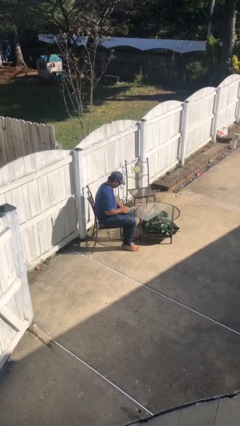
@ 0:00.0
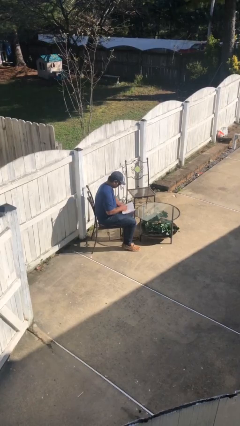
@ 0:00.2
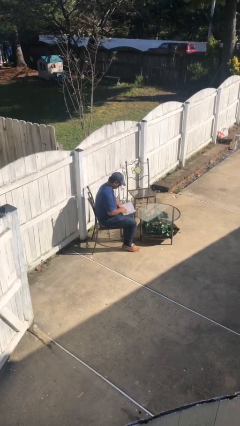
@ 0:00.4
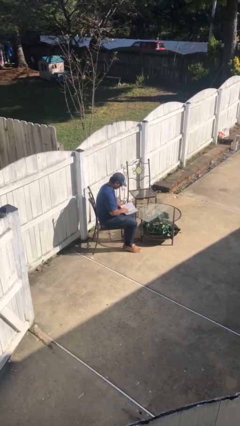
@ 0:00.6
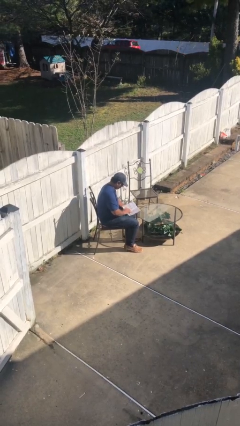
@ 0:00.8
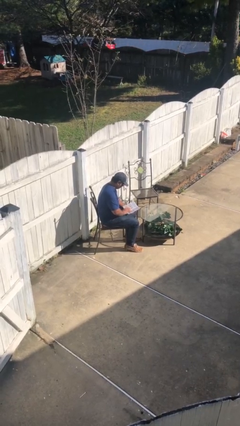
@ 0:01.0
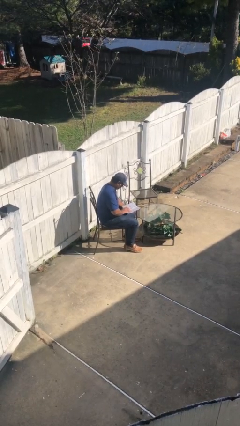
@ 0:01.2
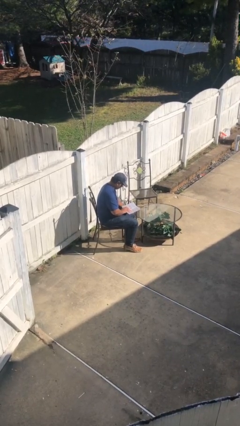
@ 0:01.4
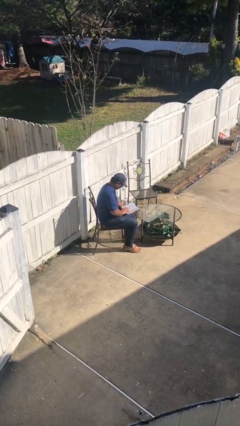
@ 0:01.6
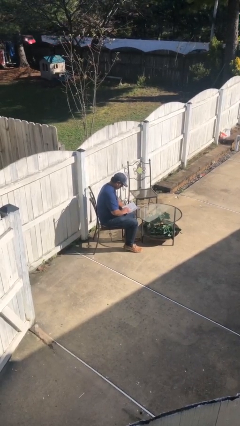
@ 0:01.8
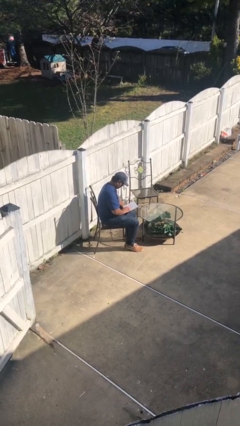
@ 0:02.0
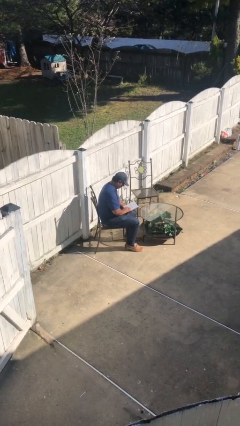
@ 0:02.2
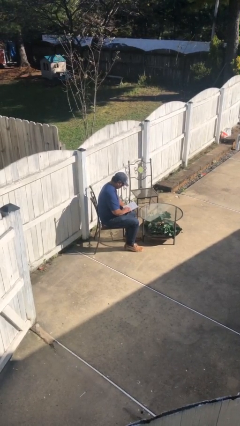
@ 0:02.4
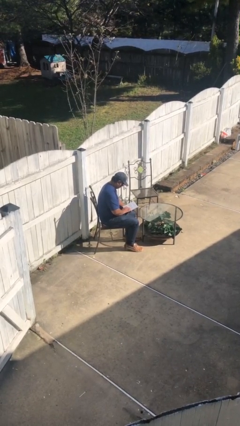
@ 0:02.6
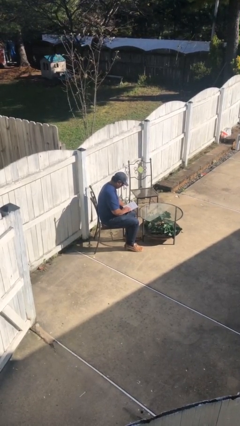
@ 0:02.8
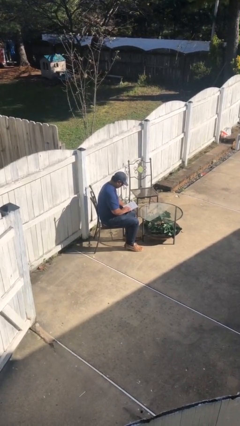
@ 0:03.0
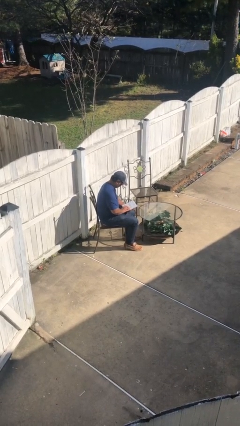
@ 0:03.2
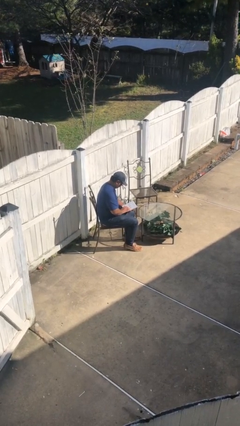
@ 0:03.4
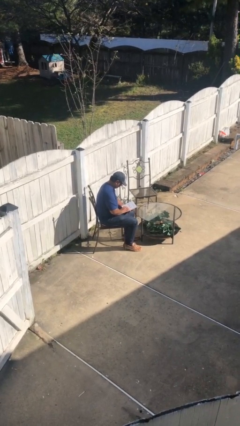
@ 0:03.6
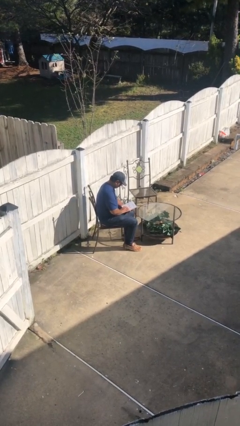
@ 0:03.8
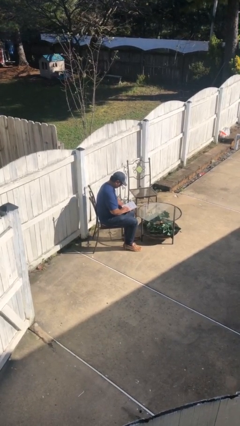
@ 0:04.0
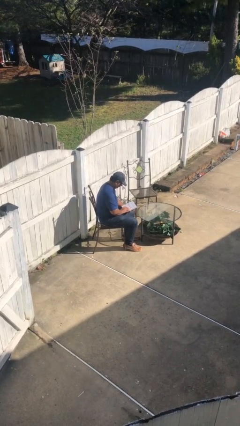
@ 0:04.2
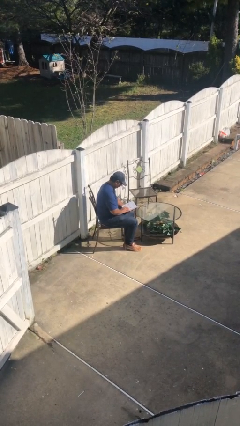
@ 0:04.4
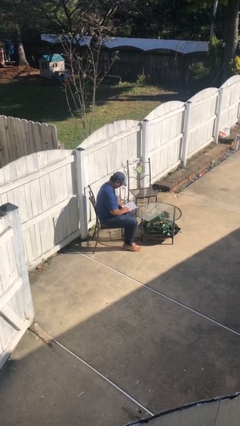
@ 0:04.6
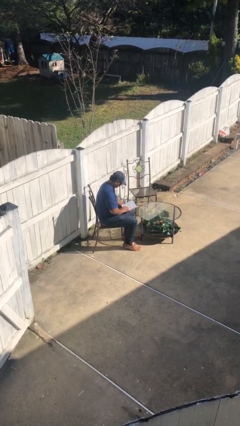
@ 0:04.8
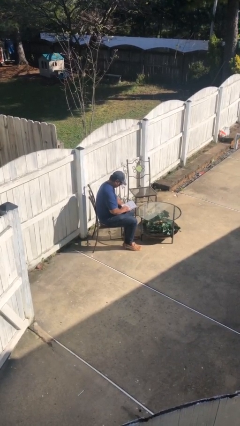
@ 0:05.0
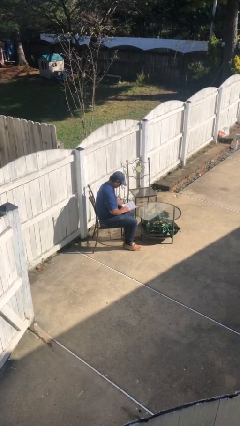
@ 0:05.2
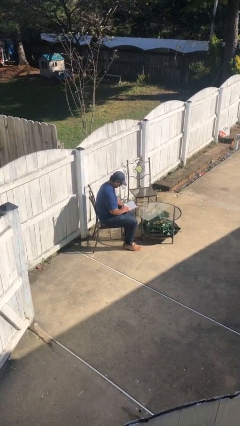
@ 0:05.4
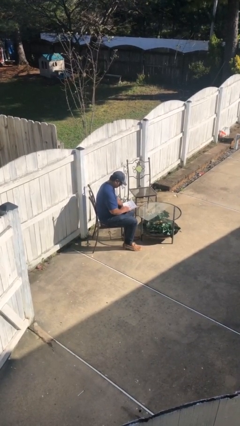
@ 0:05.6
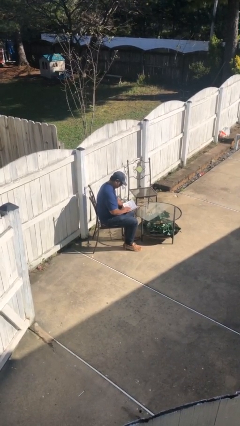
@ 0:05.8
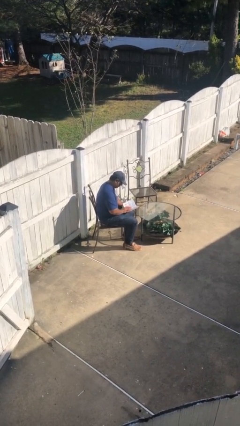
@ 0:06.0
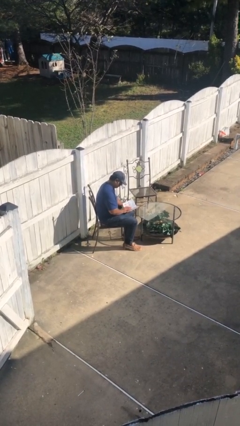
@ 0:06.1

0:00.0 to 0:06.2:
person reads document

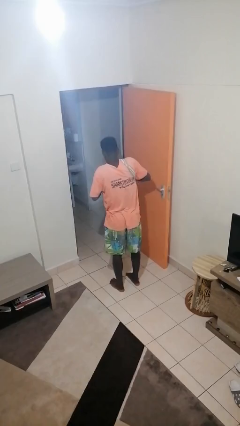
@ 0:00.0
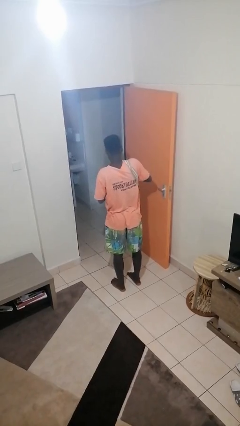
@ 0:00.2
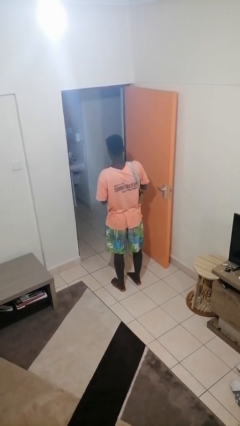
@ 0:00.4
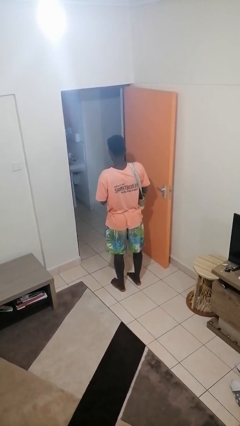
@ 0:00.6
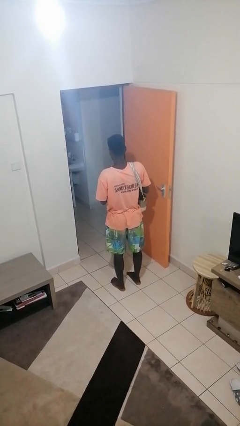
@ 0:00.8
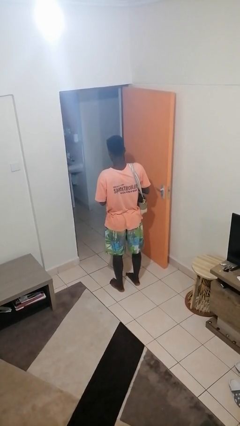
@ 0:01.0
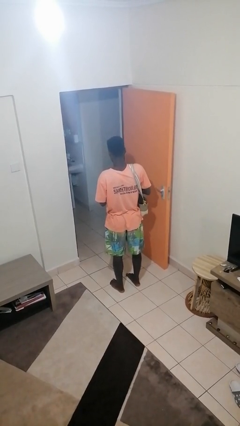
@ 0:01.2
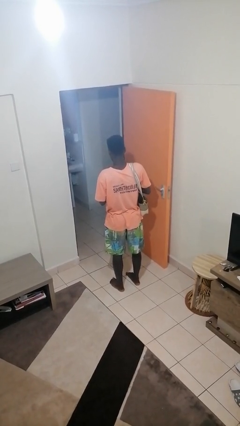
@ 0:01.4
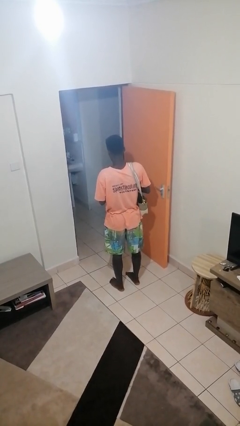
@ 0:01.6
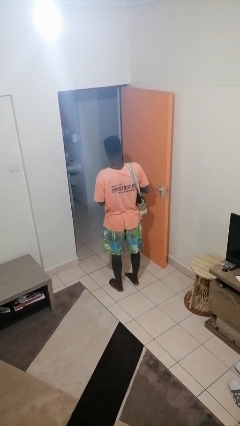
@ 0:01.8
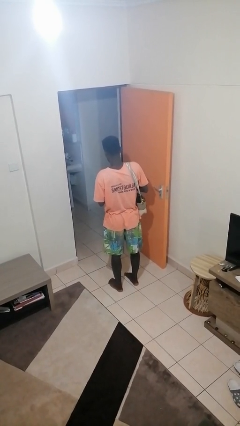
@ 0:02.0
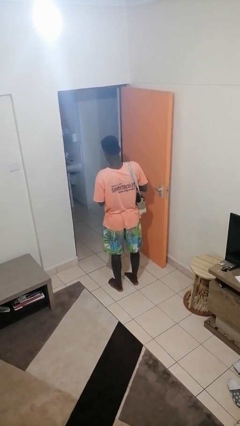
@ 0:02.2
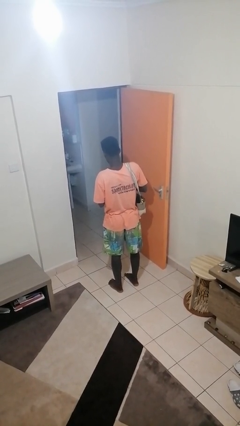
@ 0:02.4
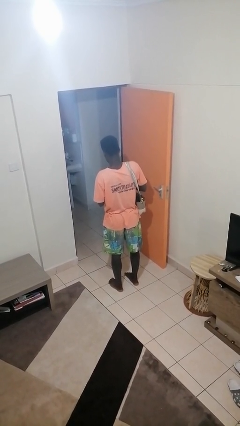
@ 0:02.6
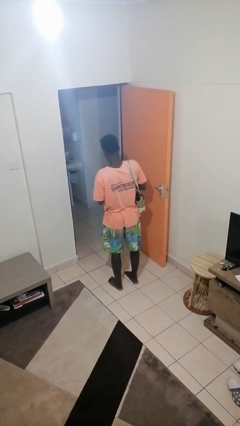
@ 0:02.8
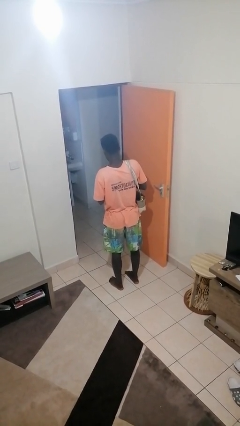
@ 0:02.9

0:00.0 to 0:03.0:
person takes object from purse

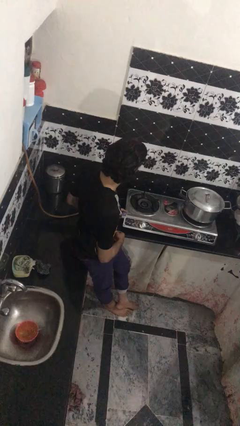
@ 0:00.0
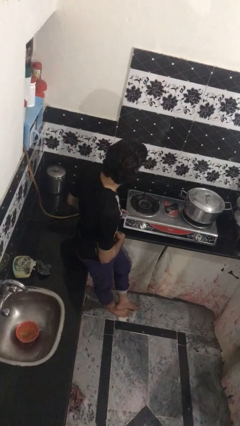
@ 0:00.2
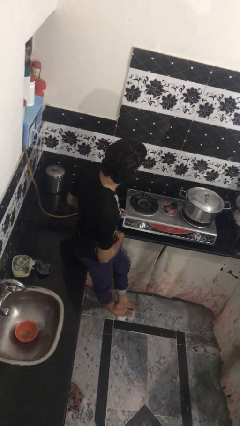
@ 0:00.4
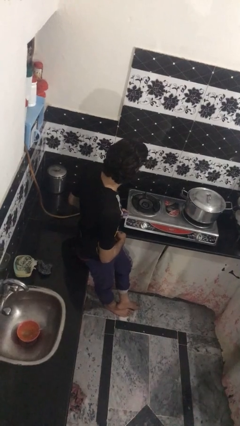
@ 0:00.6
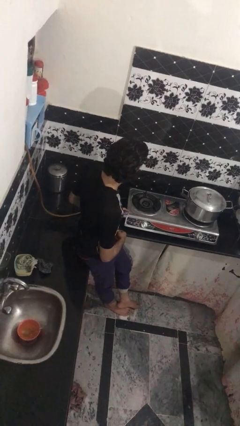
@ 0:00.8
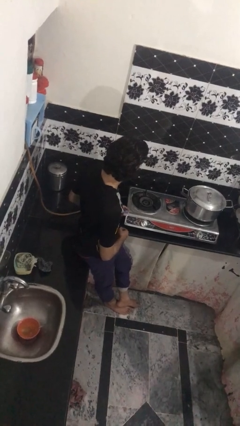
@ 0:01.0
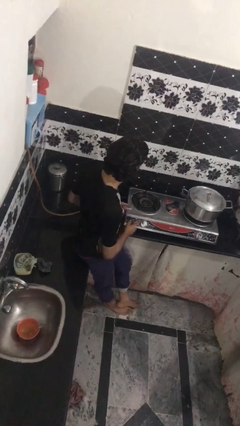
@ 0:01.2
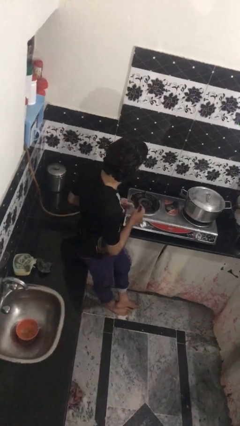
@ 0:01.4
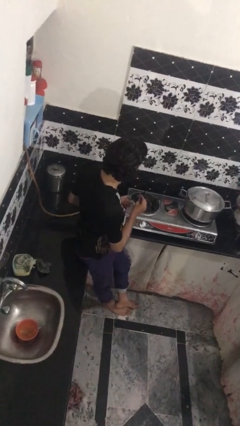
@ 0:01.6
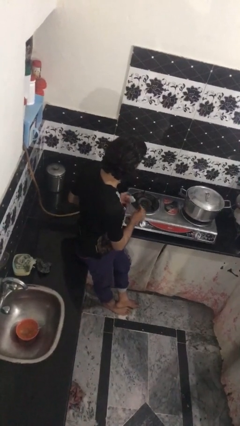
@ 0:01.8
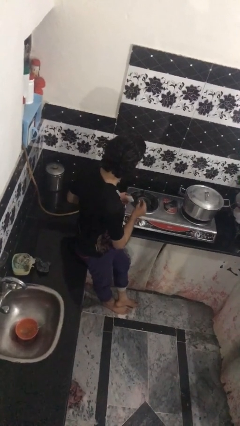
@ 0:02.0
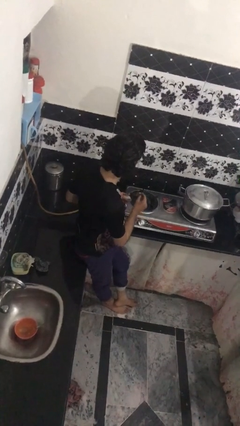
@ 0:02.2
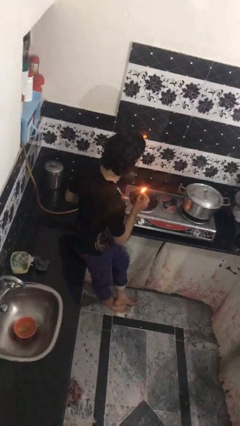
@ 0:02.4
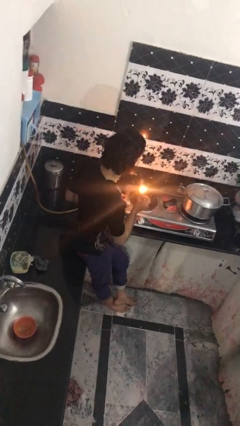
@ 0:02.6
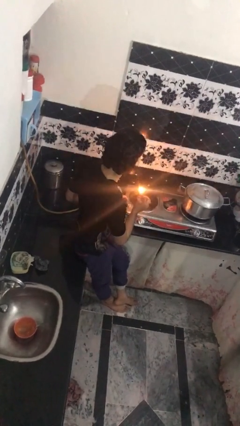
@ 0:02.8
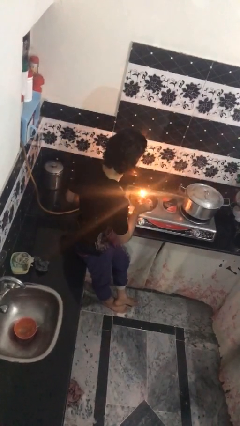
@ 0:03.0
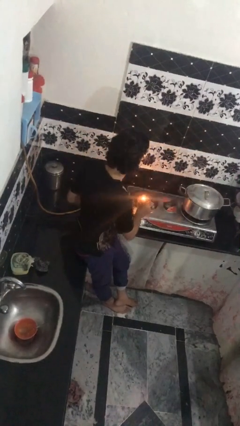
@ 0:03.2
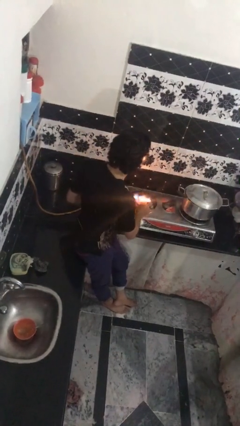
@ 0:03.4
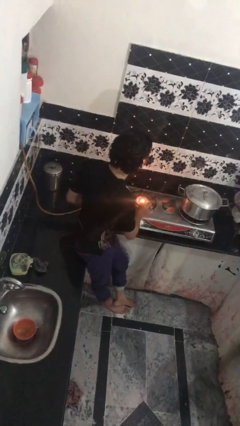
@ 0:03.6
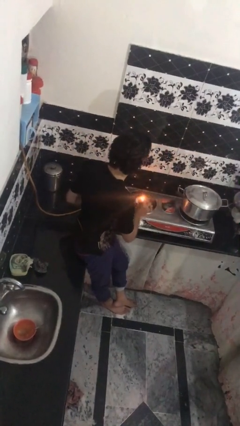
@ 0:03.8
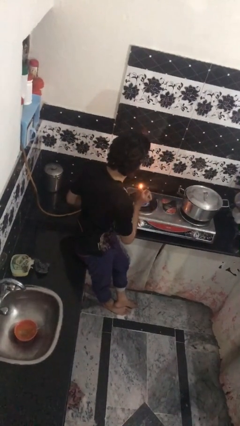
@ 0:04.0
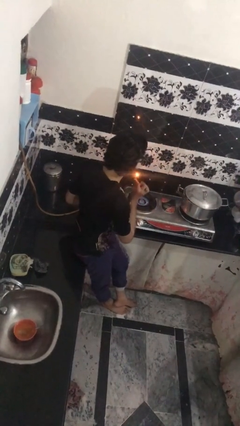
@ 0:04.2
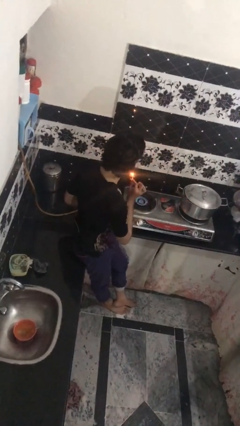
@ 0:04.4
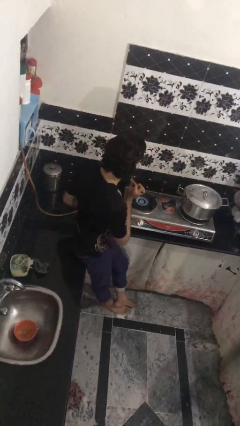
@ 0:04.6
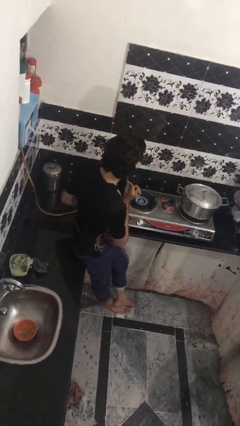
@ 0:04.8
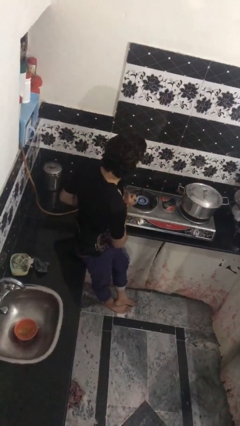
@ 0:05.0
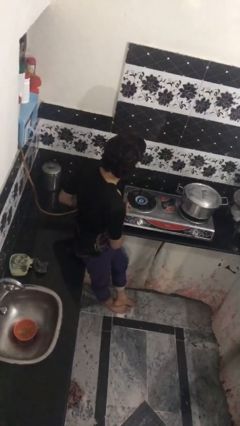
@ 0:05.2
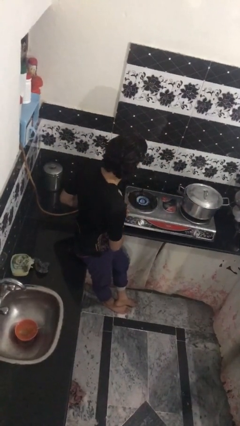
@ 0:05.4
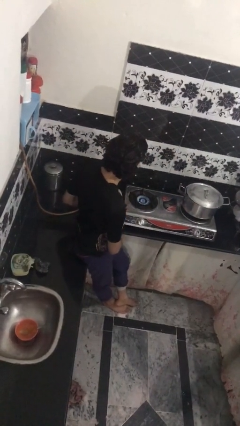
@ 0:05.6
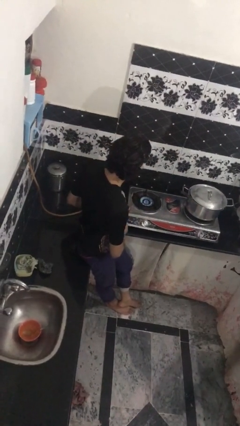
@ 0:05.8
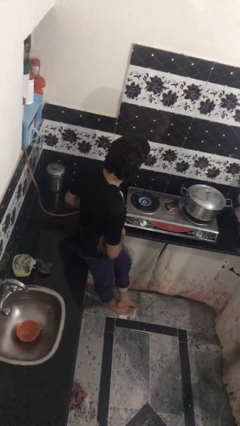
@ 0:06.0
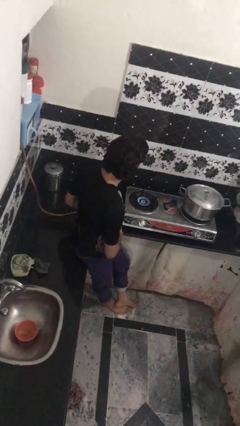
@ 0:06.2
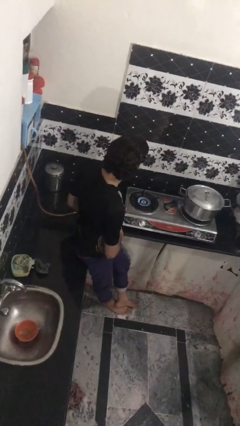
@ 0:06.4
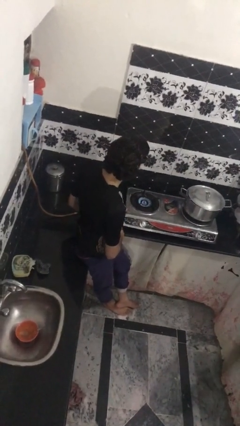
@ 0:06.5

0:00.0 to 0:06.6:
person turns on stovetop

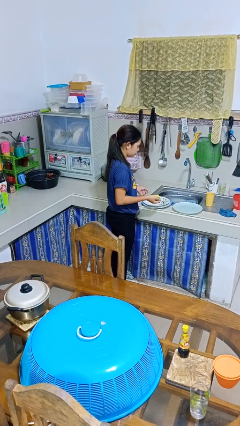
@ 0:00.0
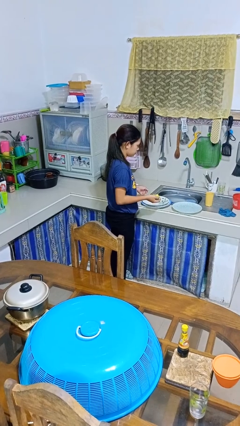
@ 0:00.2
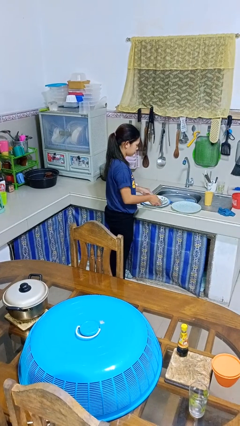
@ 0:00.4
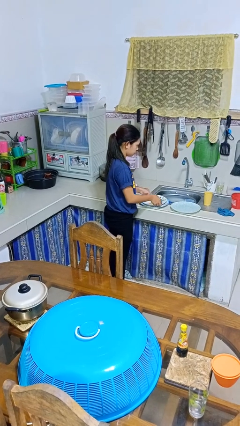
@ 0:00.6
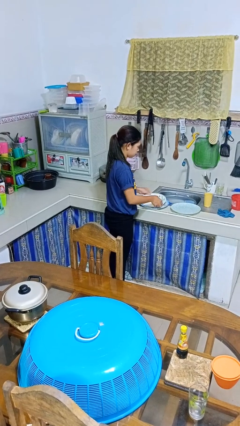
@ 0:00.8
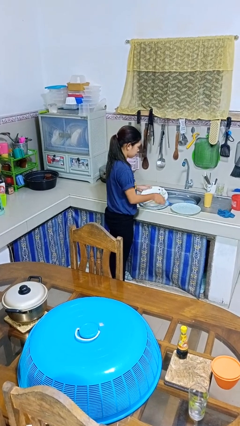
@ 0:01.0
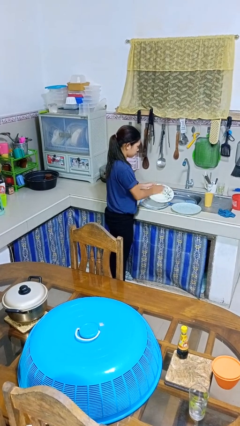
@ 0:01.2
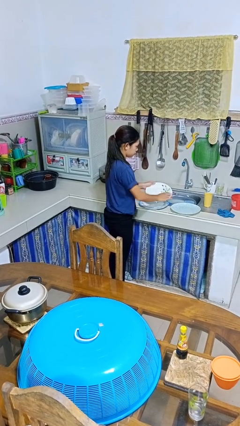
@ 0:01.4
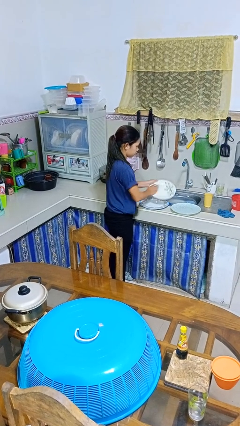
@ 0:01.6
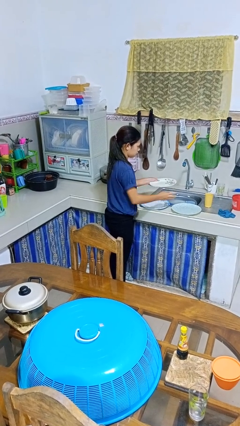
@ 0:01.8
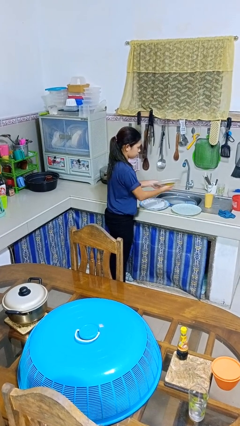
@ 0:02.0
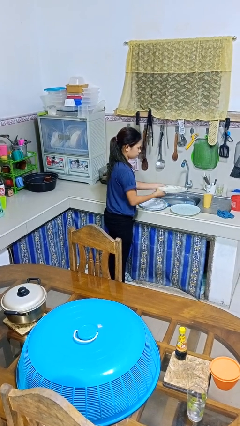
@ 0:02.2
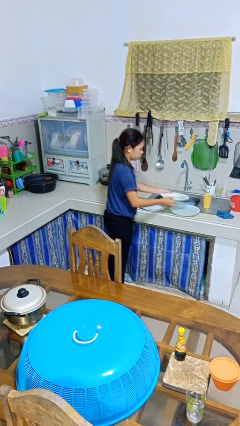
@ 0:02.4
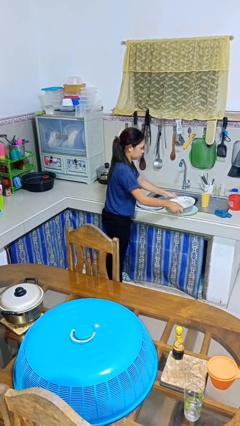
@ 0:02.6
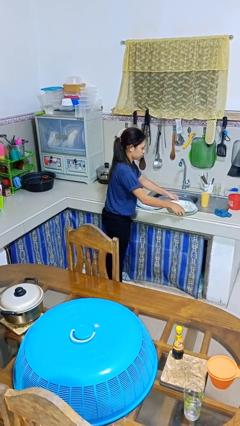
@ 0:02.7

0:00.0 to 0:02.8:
person washes dish
